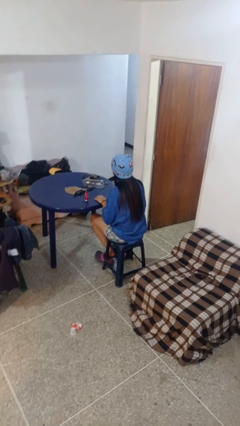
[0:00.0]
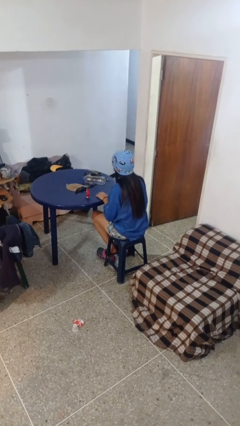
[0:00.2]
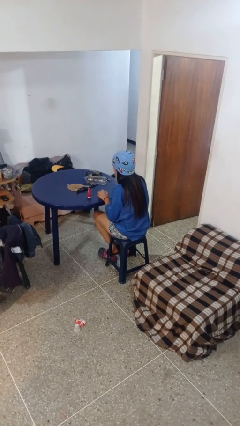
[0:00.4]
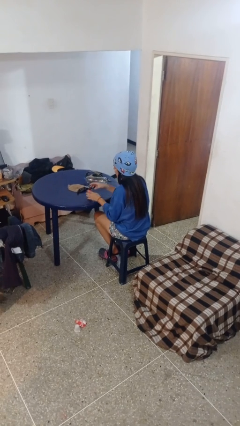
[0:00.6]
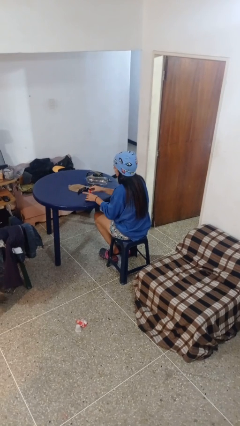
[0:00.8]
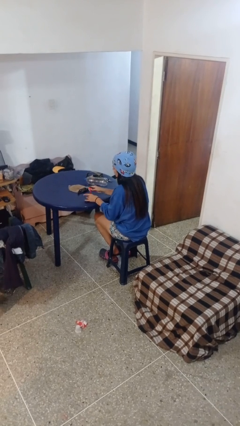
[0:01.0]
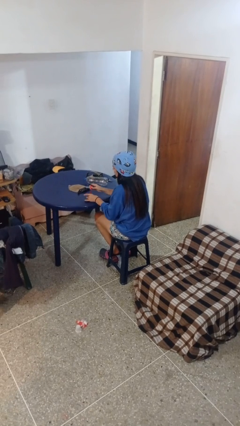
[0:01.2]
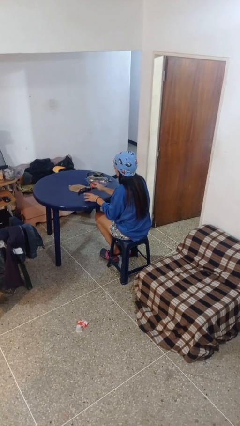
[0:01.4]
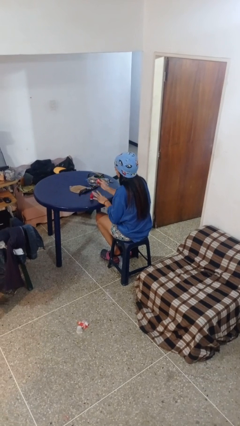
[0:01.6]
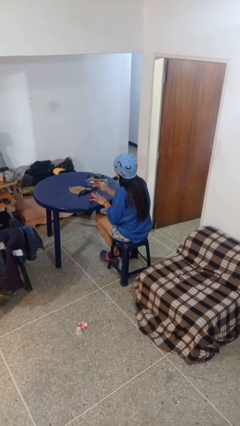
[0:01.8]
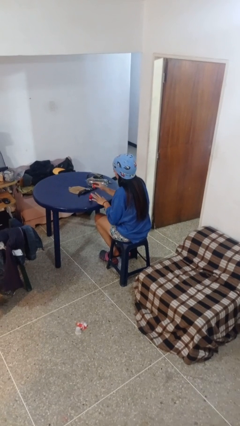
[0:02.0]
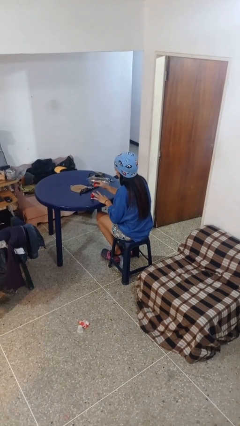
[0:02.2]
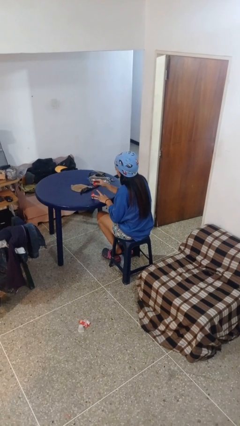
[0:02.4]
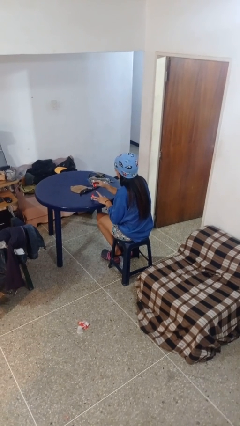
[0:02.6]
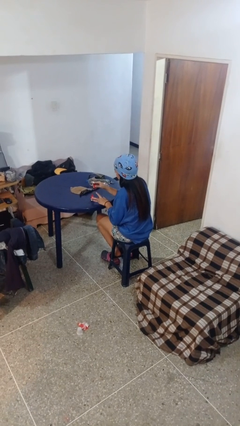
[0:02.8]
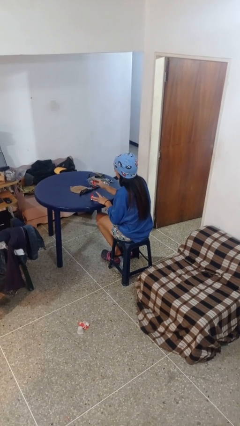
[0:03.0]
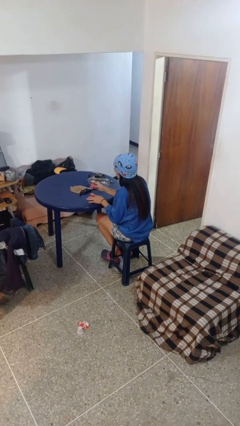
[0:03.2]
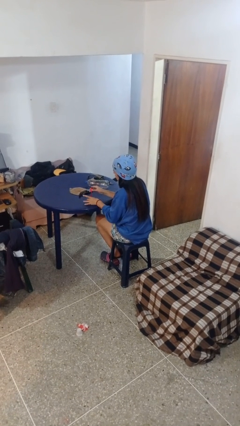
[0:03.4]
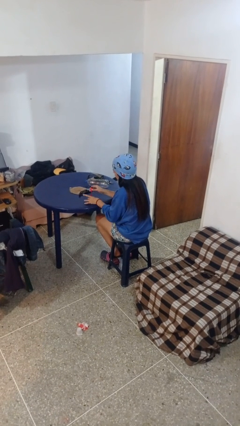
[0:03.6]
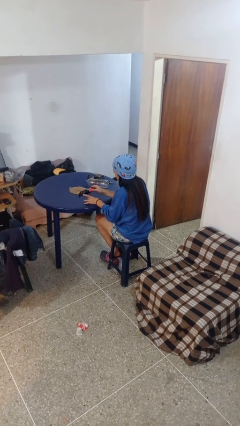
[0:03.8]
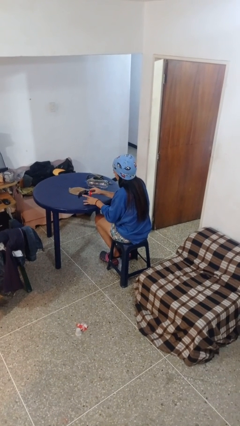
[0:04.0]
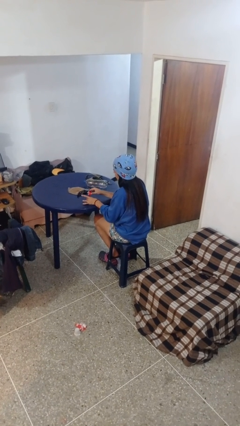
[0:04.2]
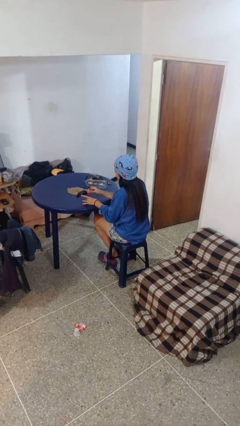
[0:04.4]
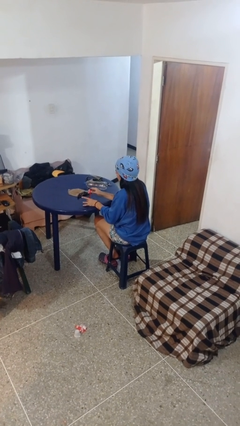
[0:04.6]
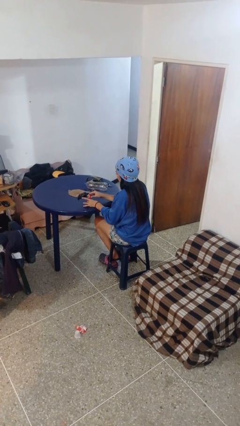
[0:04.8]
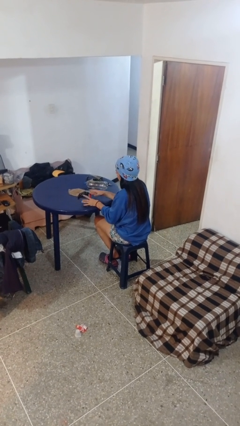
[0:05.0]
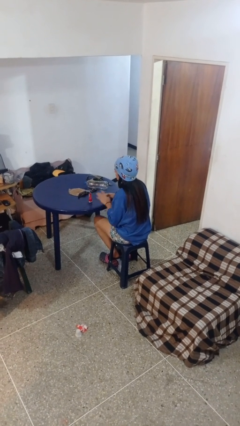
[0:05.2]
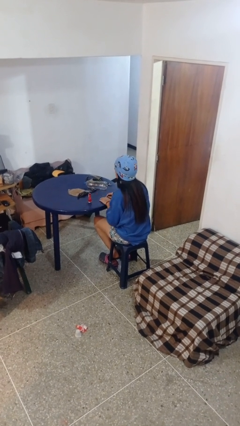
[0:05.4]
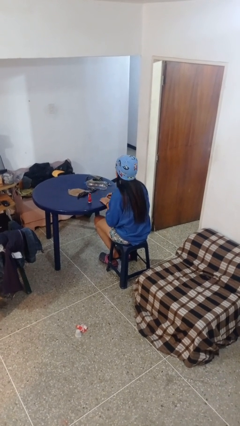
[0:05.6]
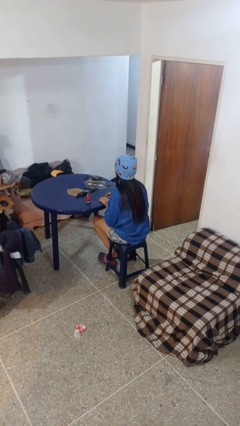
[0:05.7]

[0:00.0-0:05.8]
person paints fingernails

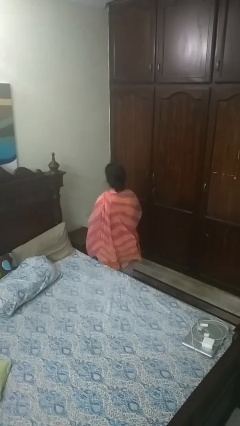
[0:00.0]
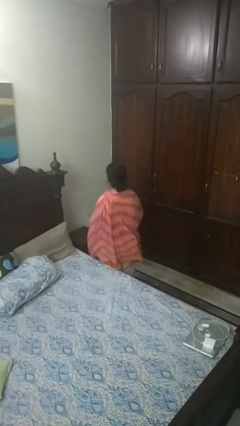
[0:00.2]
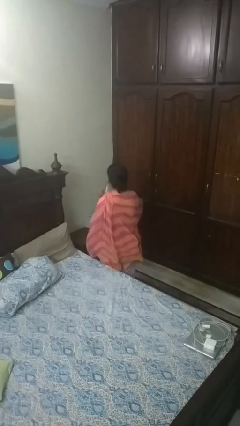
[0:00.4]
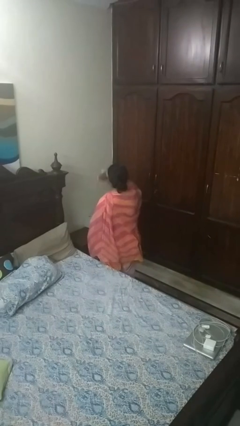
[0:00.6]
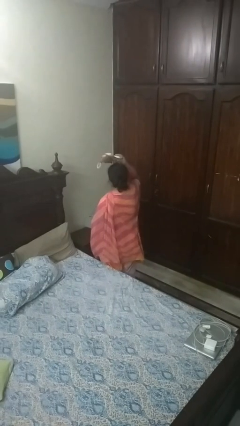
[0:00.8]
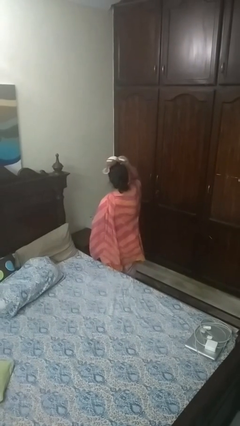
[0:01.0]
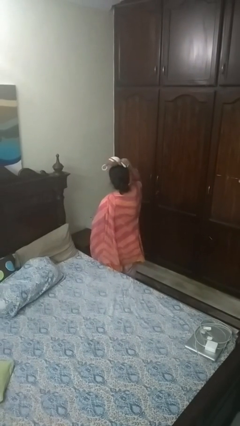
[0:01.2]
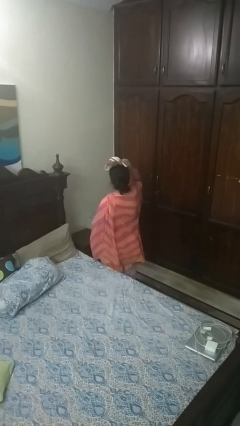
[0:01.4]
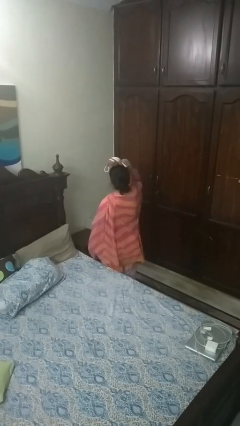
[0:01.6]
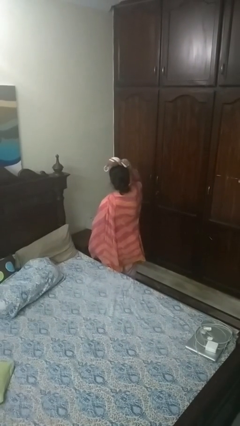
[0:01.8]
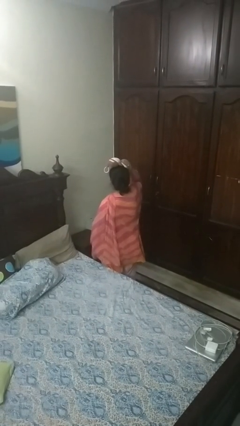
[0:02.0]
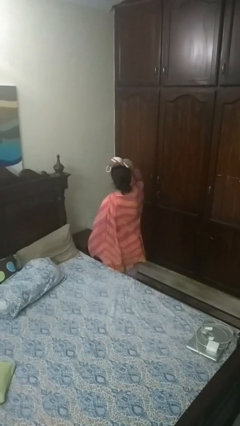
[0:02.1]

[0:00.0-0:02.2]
person holds object above head

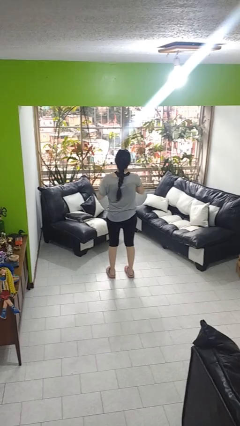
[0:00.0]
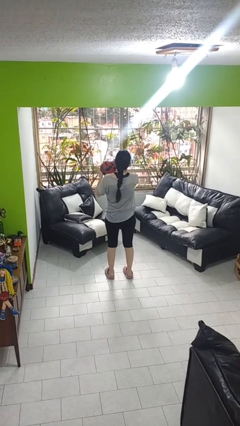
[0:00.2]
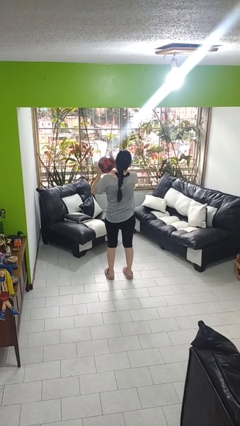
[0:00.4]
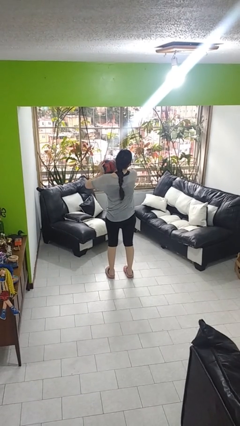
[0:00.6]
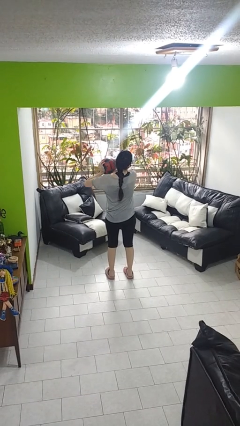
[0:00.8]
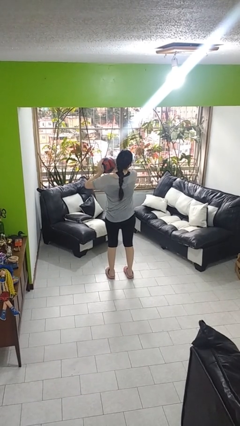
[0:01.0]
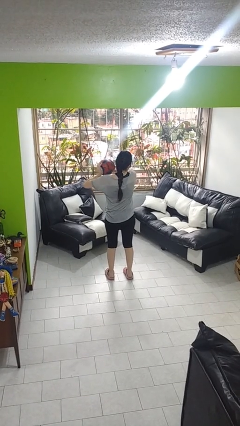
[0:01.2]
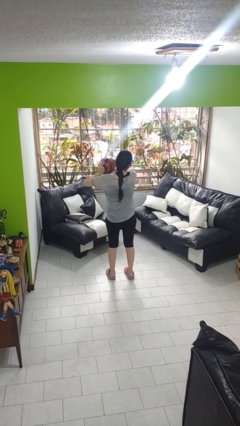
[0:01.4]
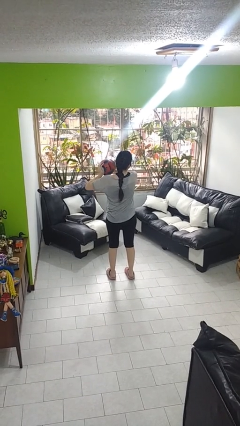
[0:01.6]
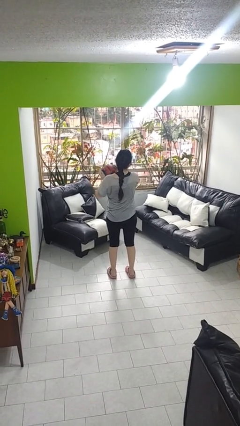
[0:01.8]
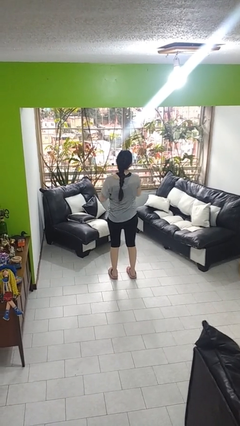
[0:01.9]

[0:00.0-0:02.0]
person squeezes object

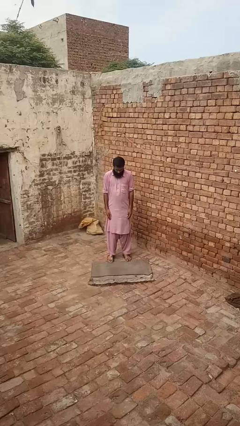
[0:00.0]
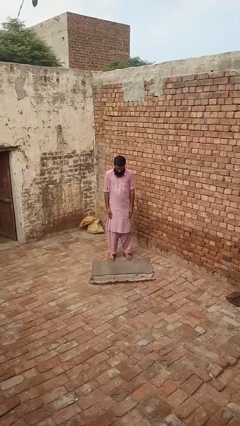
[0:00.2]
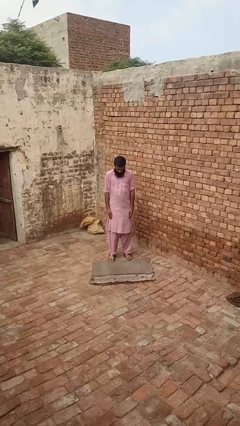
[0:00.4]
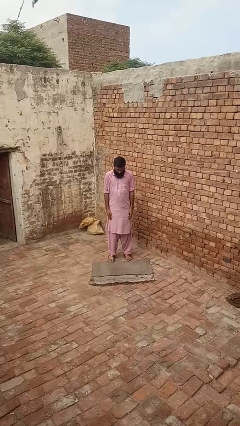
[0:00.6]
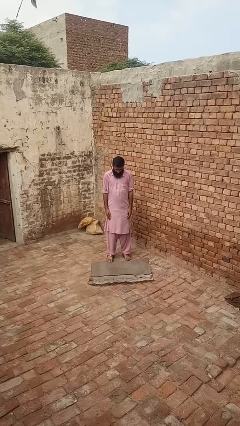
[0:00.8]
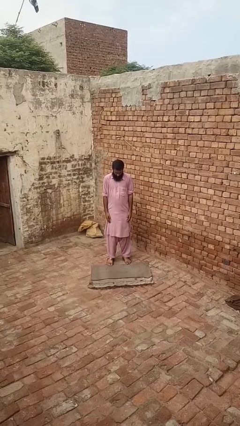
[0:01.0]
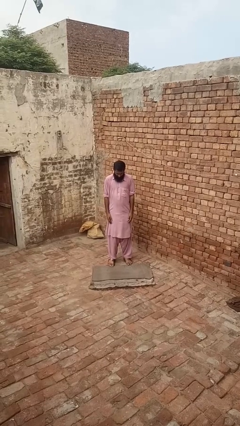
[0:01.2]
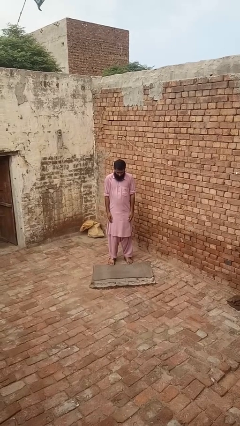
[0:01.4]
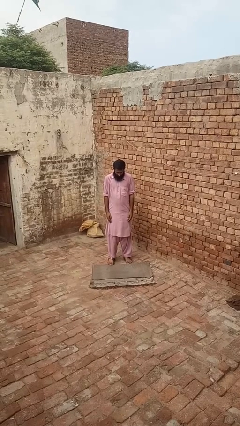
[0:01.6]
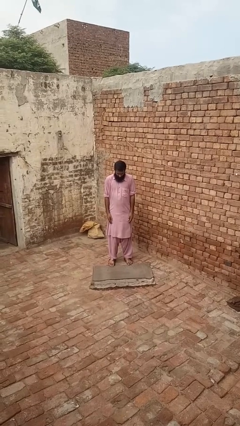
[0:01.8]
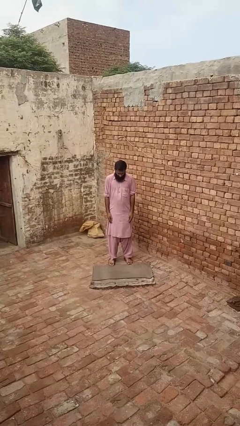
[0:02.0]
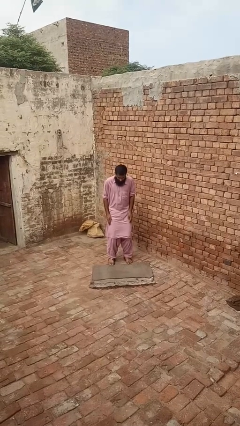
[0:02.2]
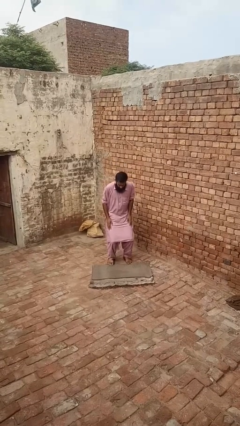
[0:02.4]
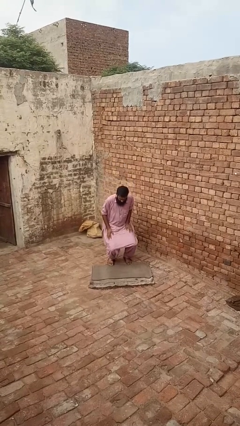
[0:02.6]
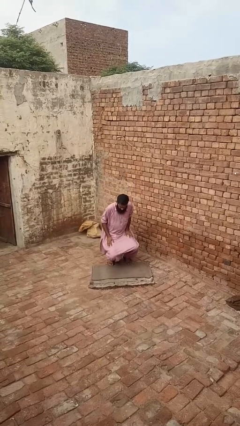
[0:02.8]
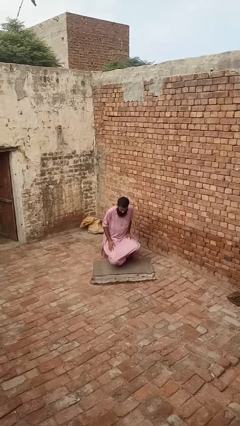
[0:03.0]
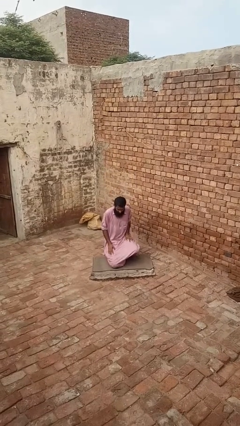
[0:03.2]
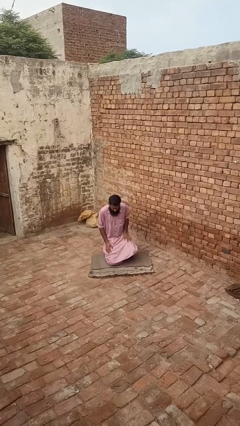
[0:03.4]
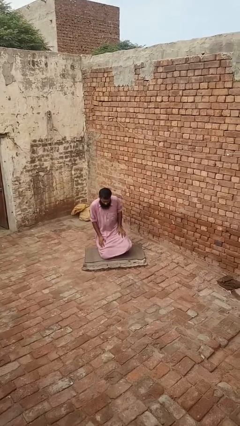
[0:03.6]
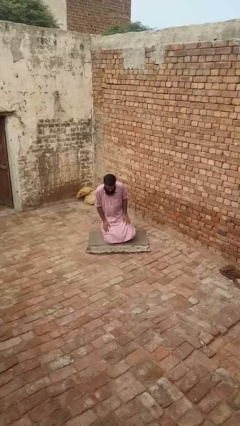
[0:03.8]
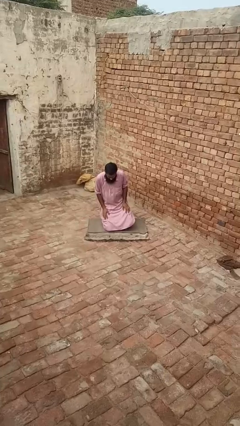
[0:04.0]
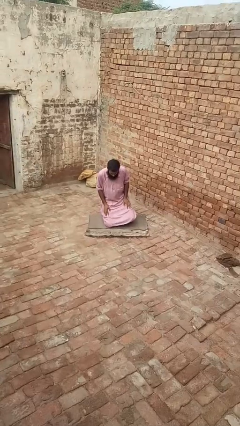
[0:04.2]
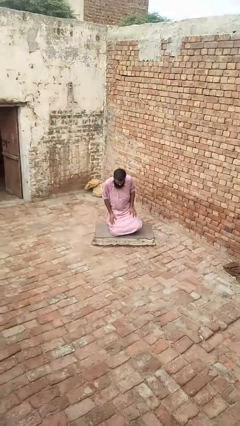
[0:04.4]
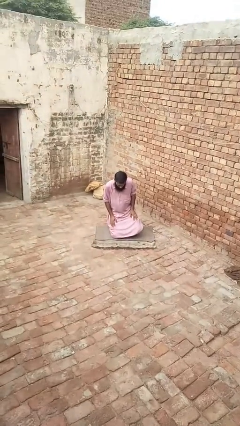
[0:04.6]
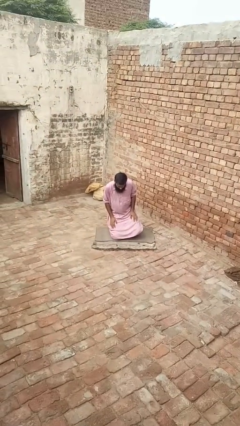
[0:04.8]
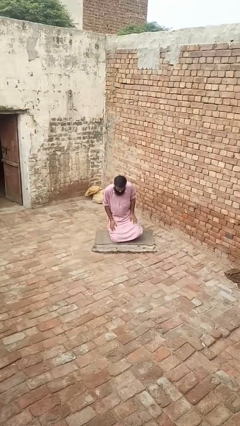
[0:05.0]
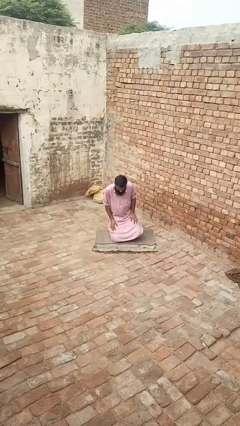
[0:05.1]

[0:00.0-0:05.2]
person kneels

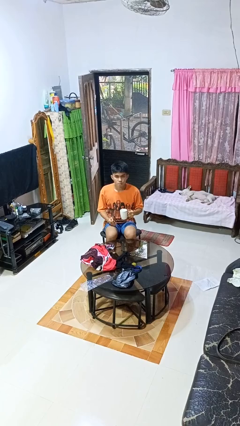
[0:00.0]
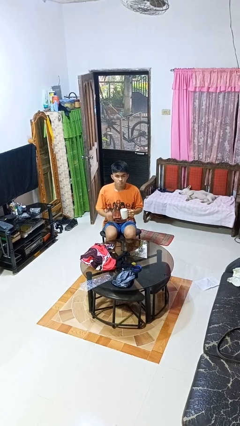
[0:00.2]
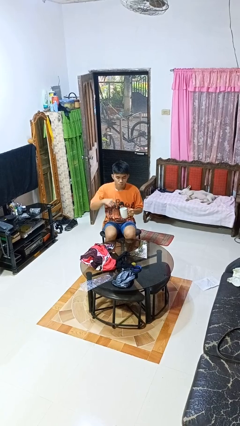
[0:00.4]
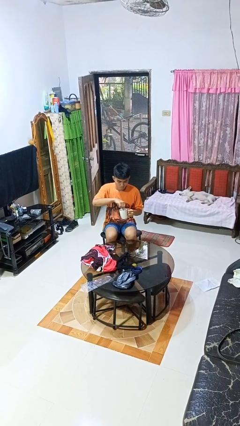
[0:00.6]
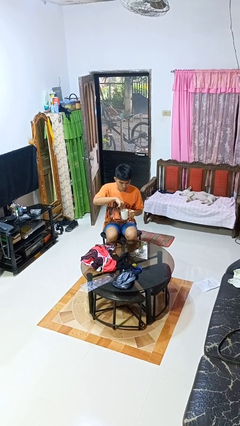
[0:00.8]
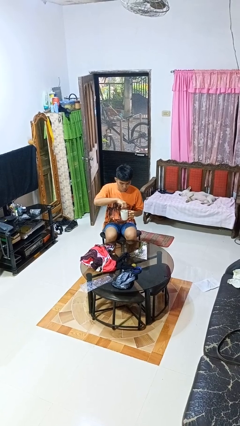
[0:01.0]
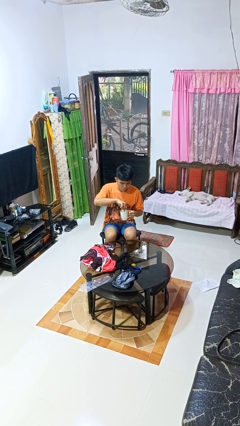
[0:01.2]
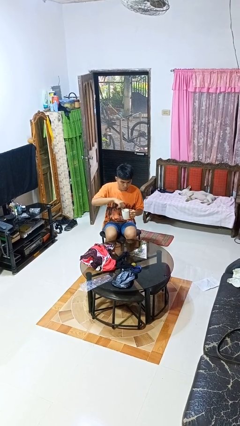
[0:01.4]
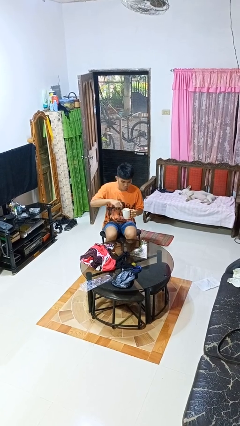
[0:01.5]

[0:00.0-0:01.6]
person stirs mug

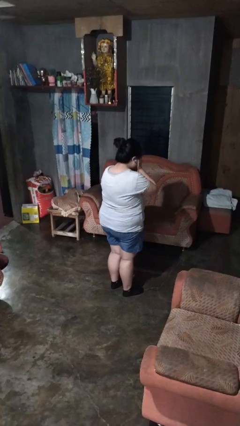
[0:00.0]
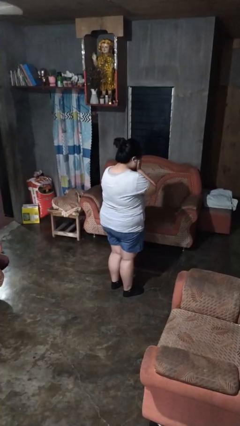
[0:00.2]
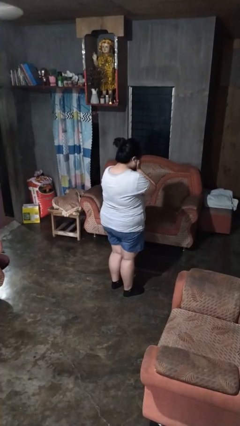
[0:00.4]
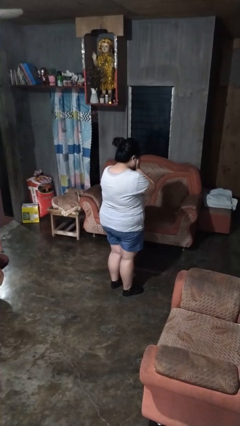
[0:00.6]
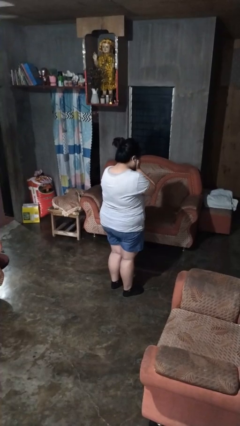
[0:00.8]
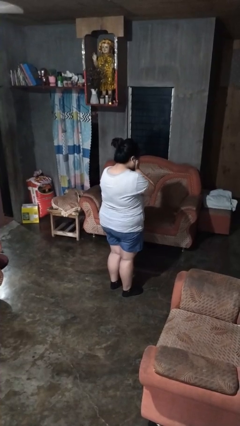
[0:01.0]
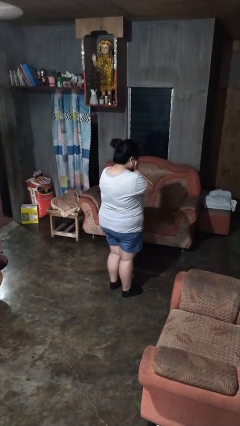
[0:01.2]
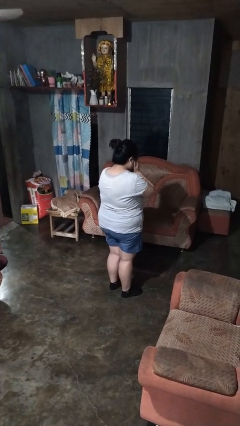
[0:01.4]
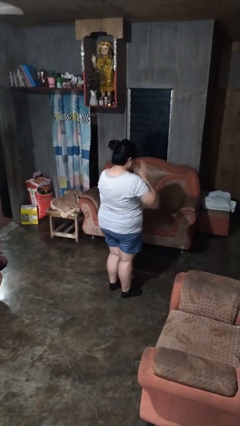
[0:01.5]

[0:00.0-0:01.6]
person covers face with hands
